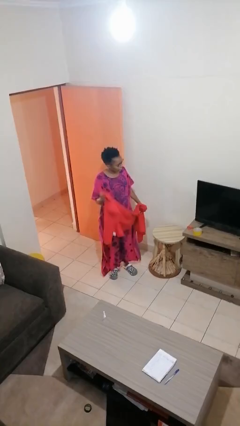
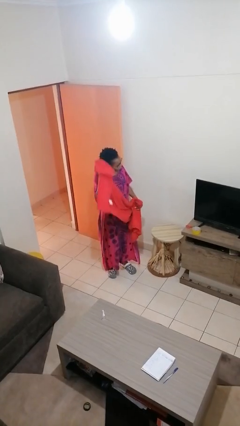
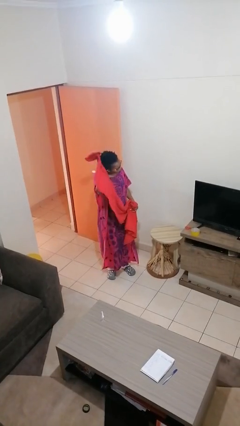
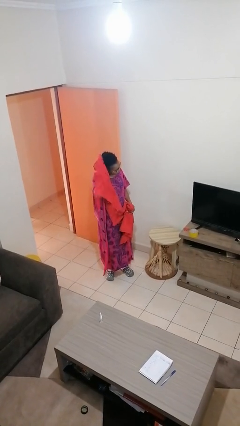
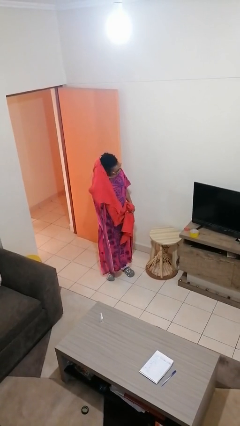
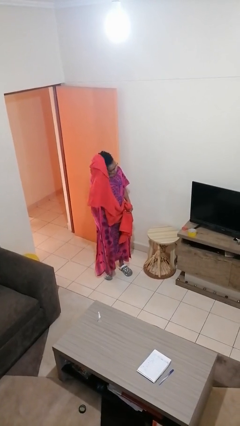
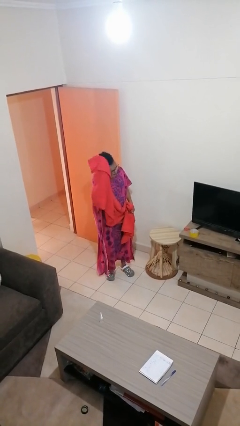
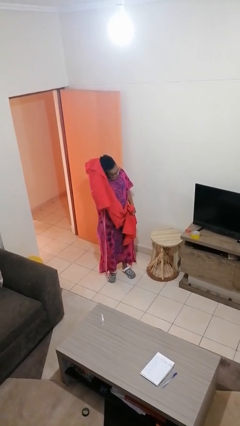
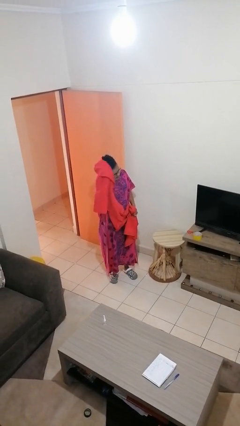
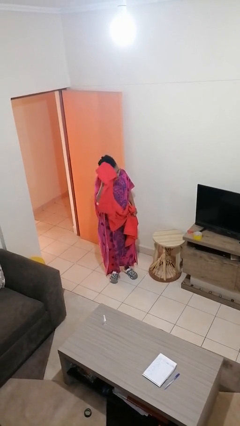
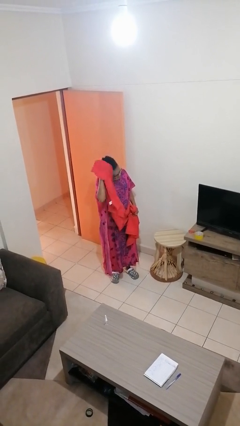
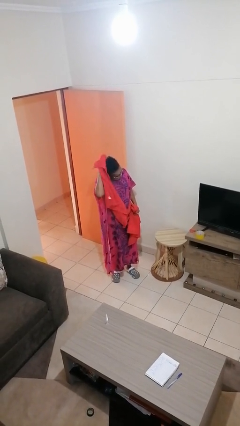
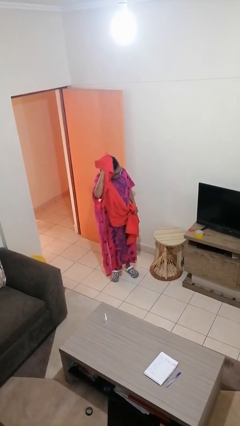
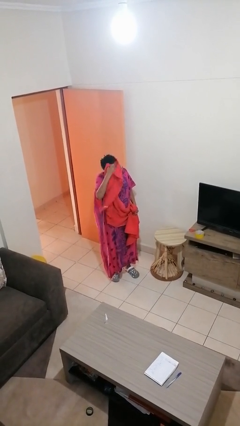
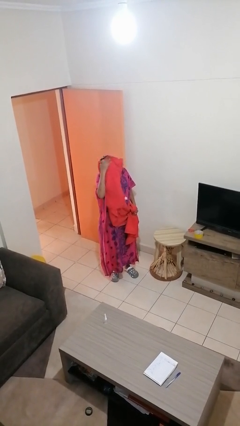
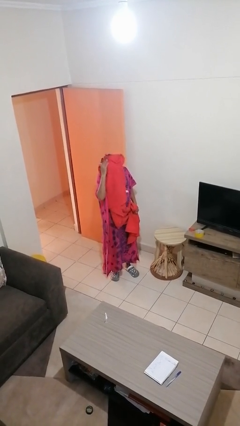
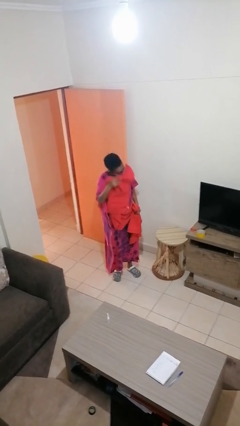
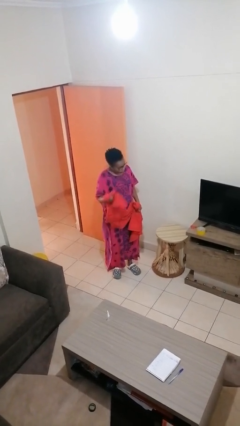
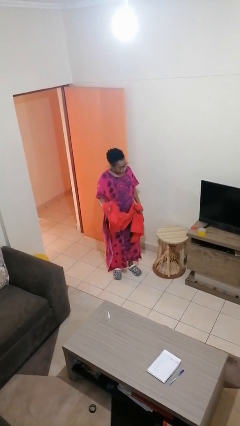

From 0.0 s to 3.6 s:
person dries hair with towel

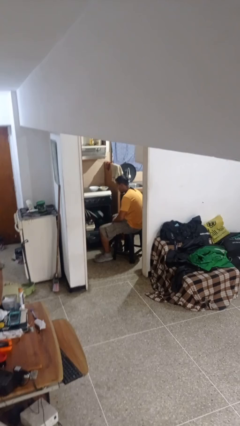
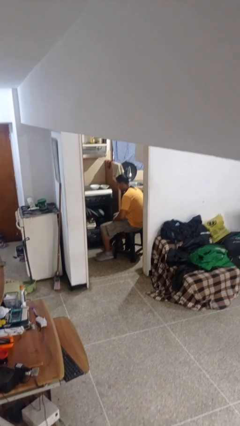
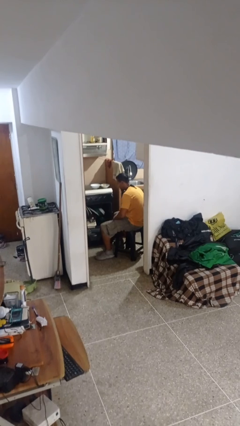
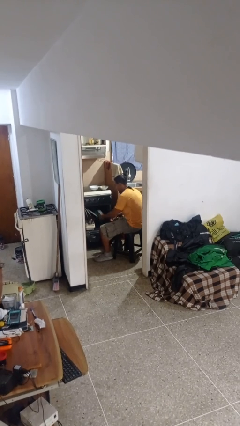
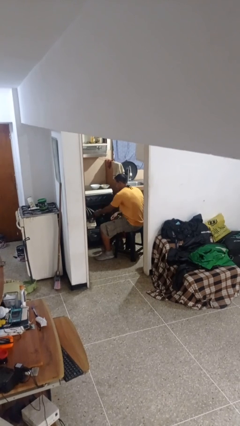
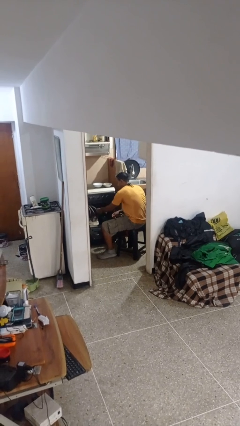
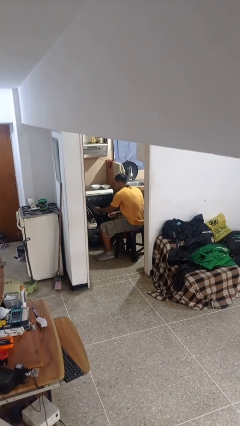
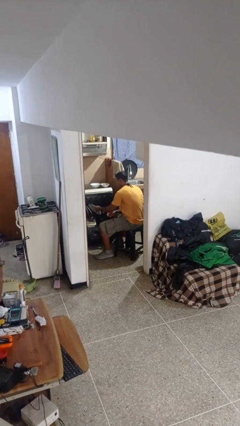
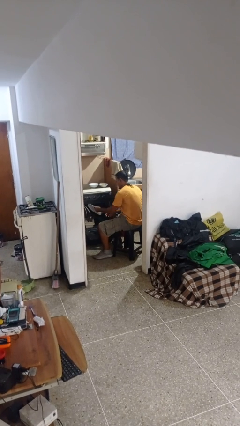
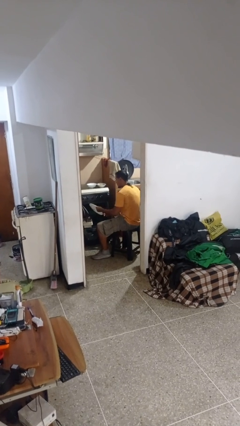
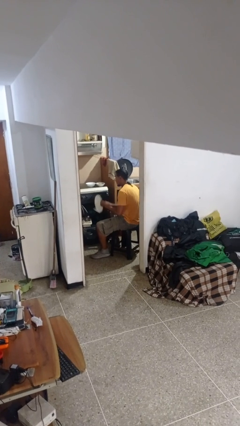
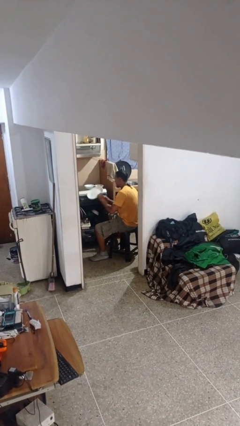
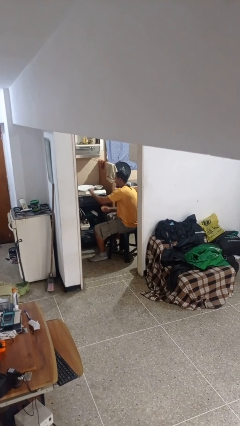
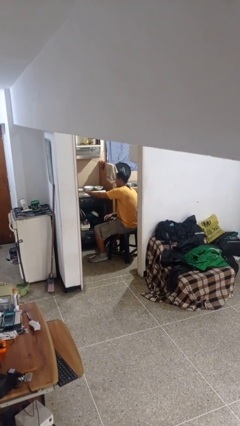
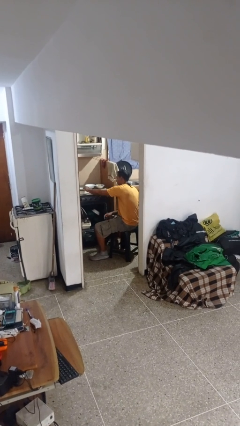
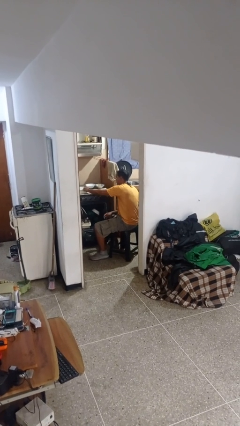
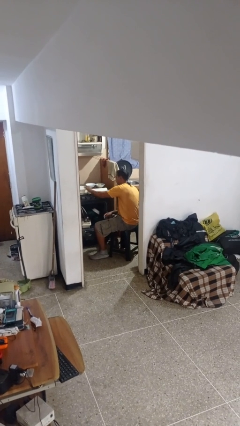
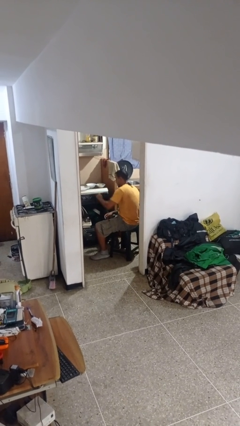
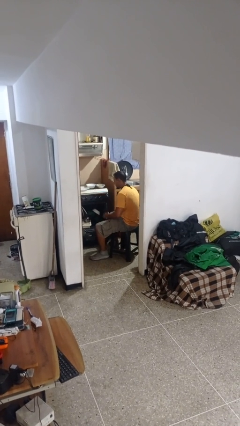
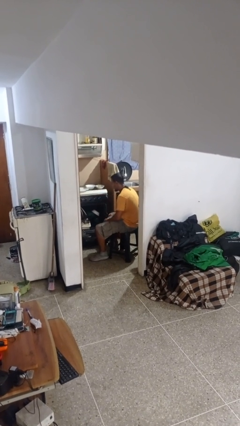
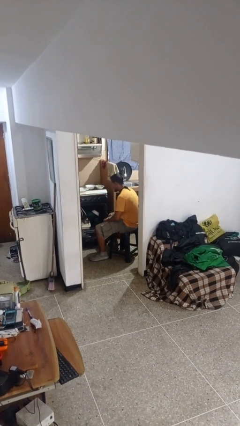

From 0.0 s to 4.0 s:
person unloads dishwasher

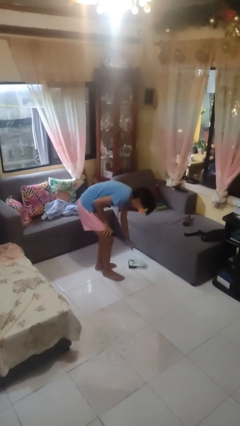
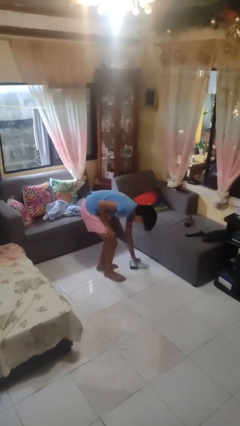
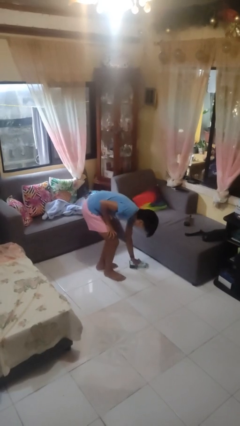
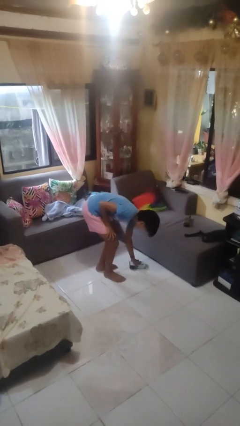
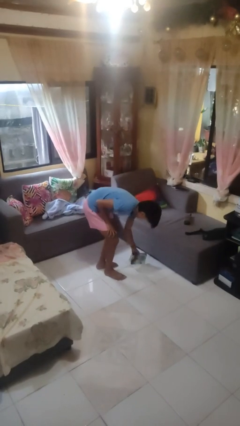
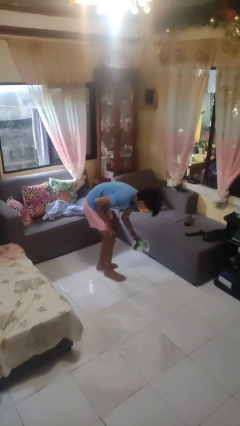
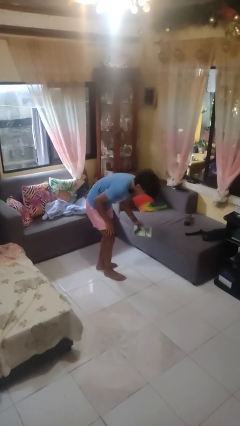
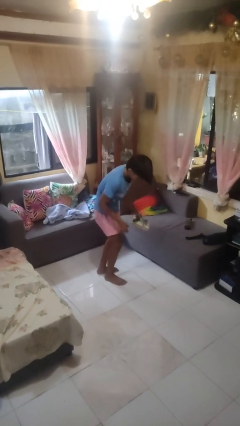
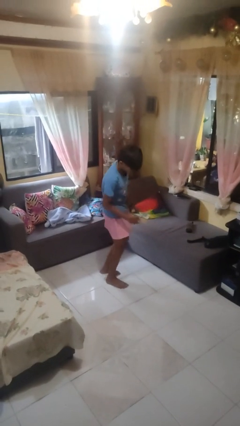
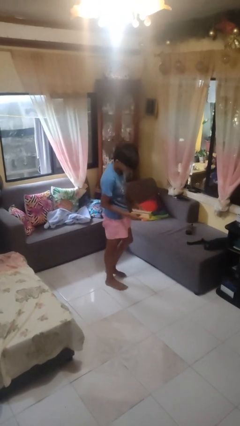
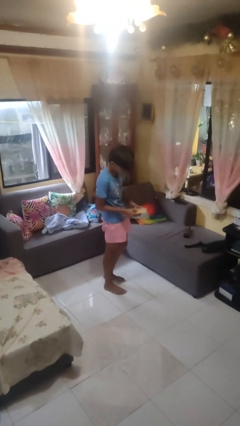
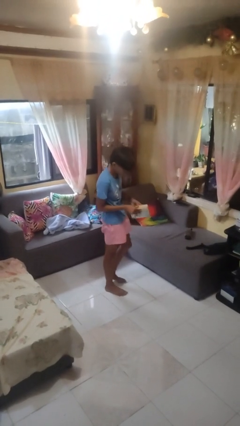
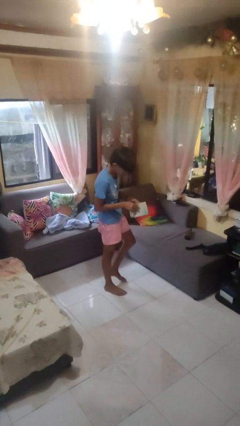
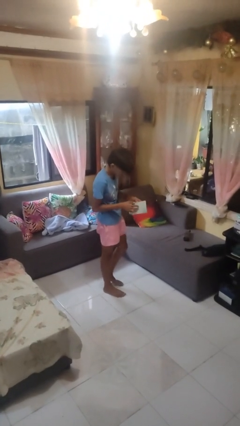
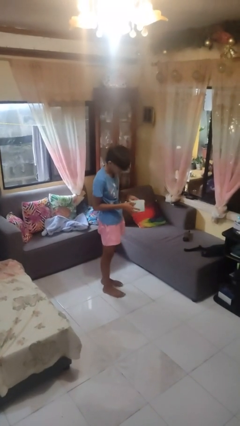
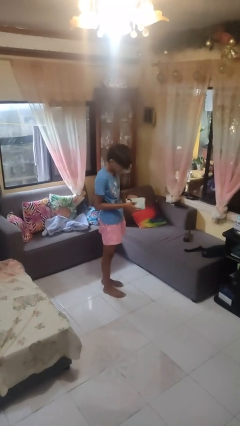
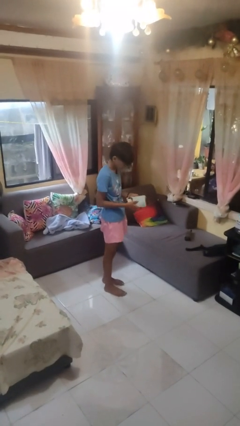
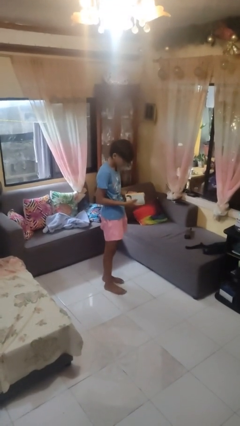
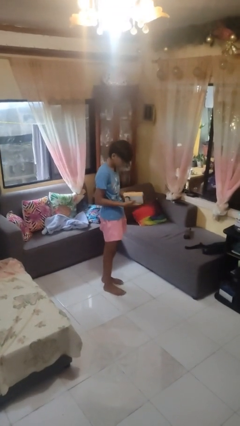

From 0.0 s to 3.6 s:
person picks up object from floor

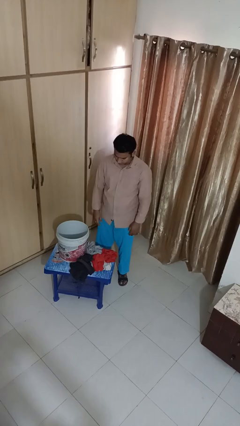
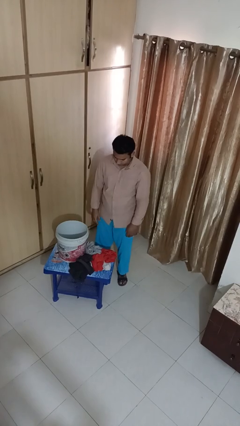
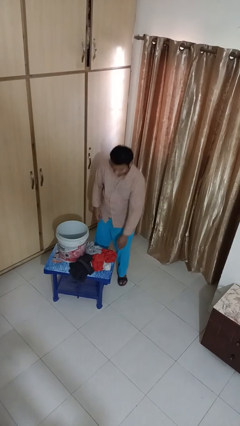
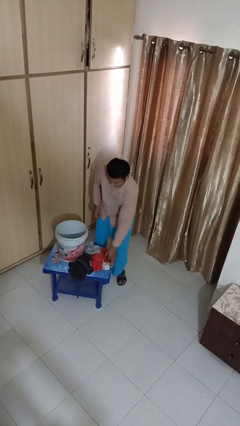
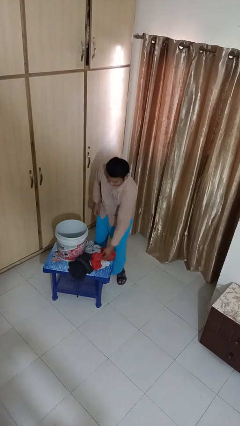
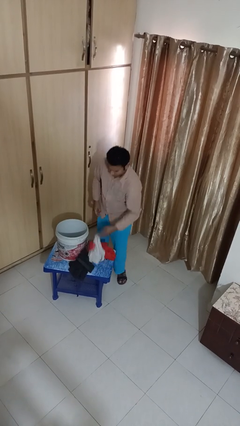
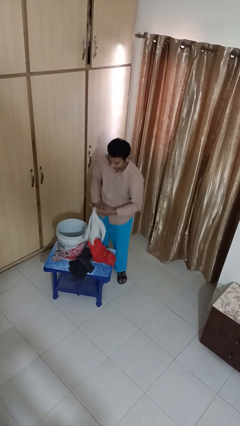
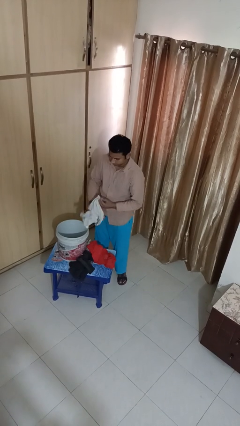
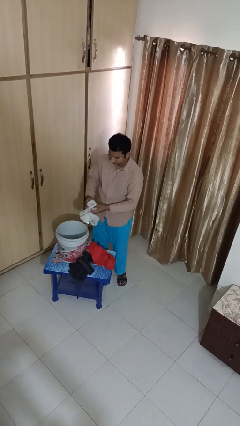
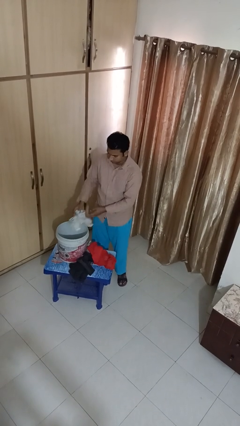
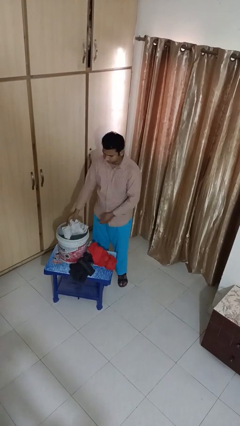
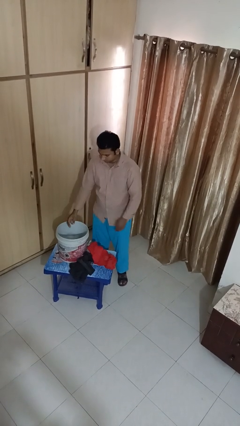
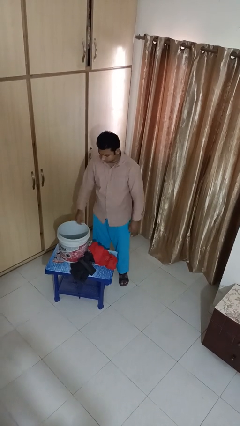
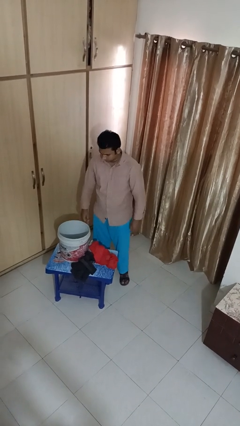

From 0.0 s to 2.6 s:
person puts object into basket

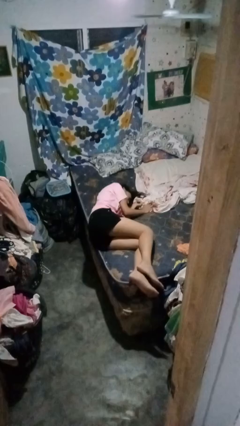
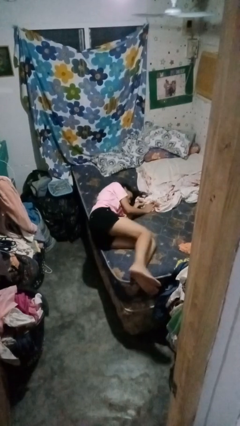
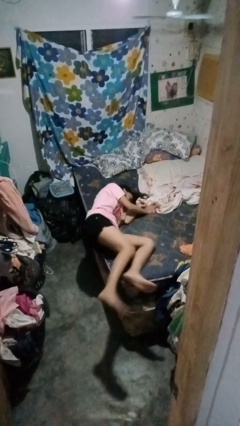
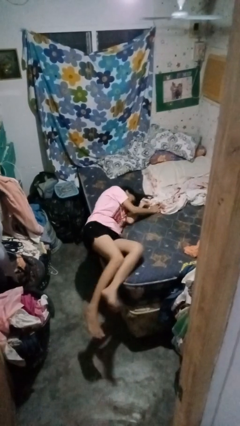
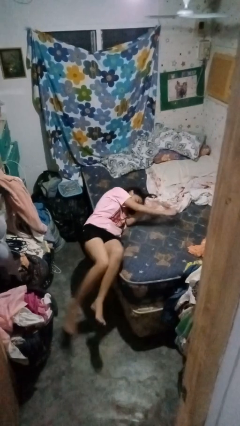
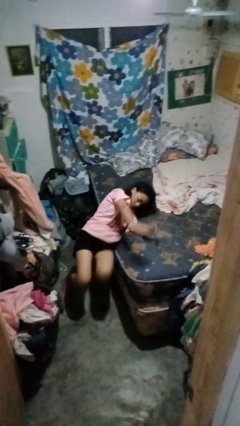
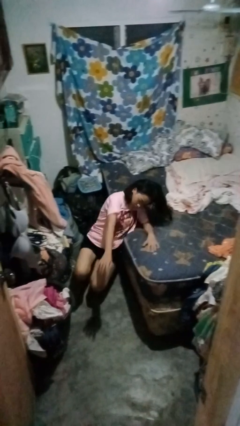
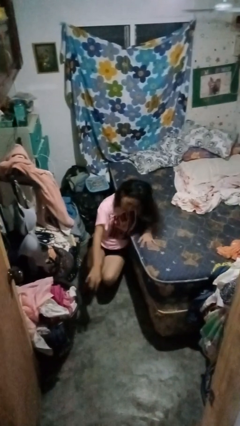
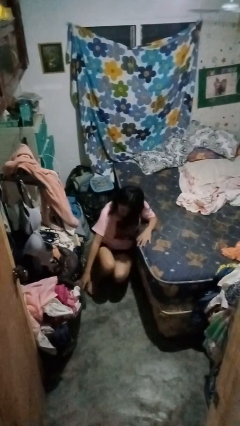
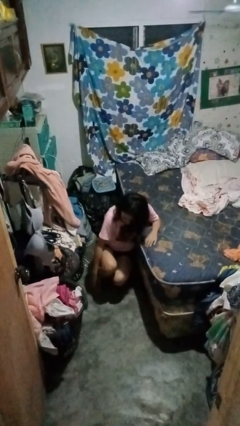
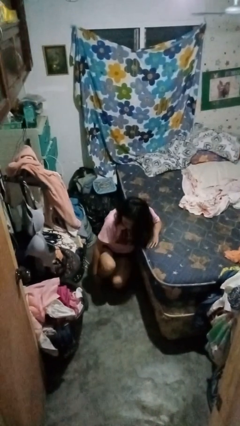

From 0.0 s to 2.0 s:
person falls from bed

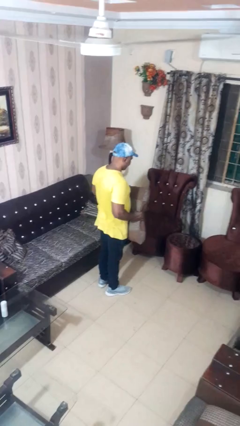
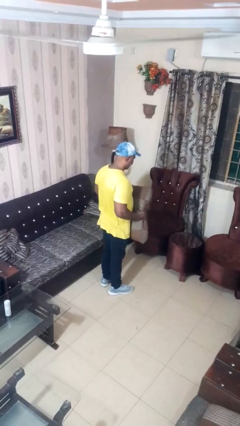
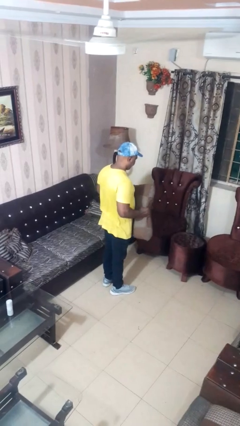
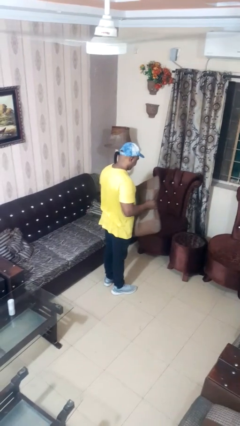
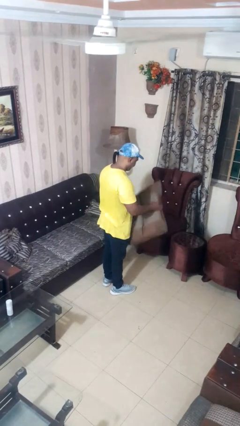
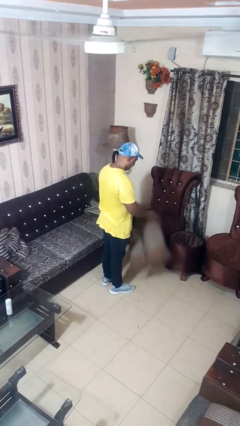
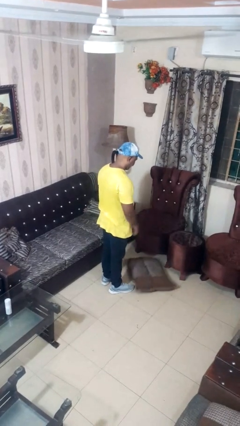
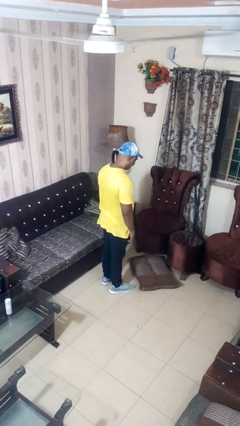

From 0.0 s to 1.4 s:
person throws object to ground
